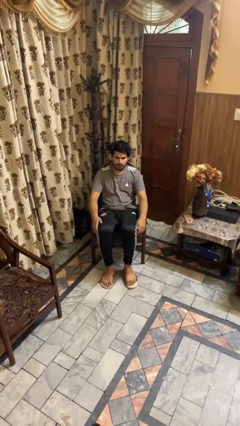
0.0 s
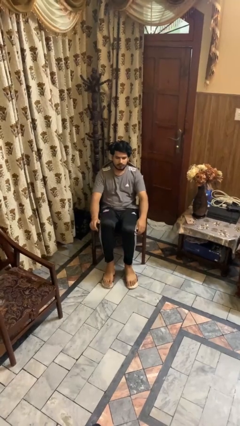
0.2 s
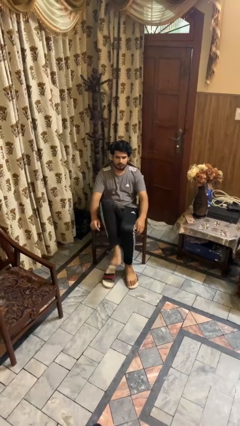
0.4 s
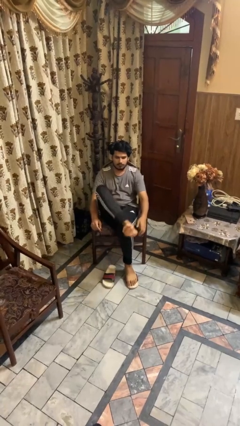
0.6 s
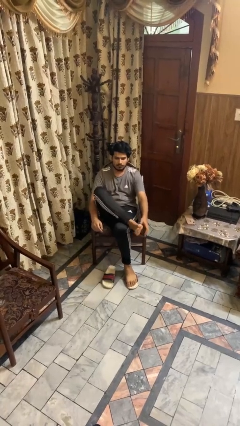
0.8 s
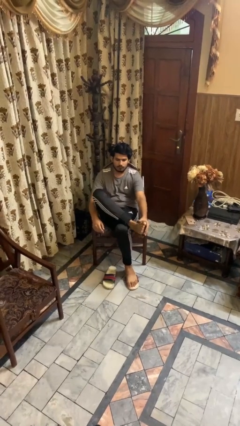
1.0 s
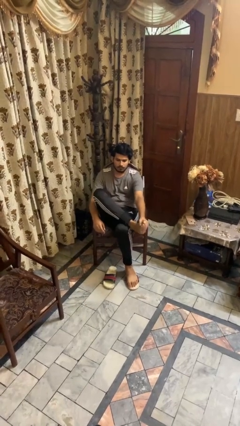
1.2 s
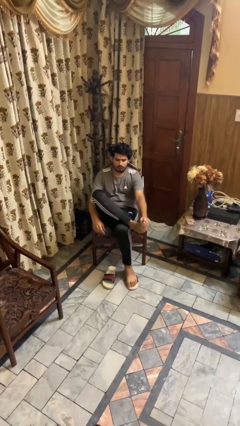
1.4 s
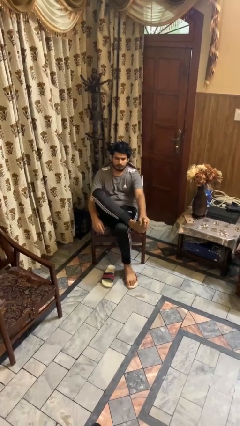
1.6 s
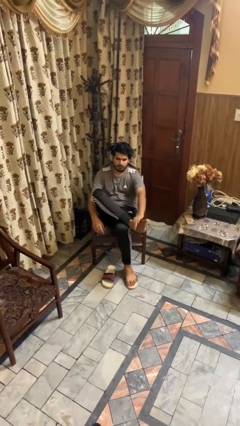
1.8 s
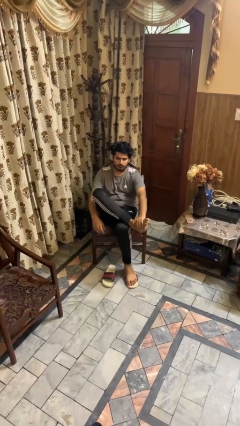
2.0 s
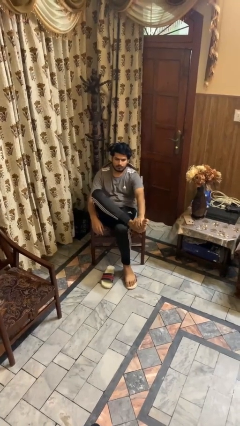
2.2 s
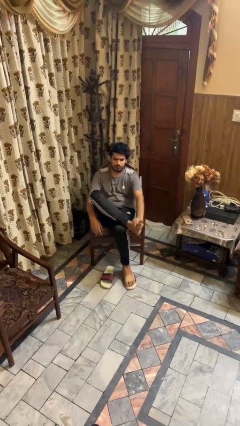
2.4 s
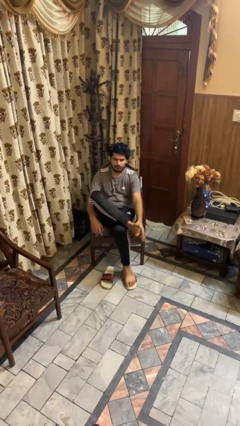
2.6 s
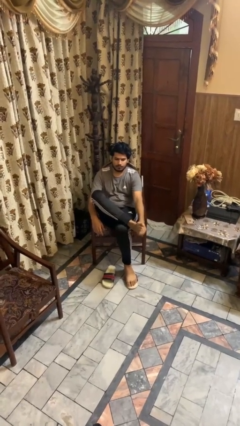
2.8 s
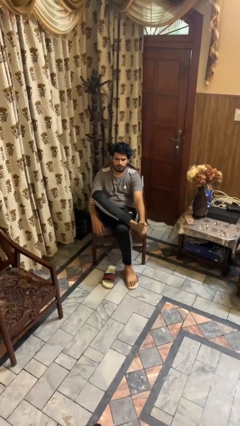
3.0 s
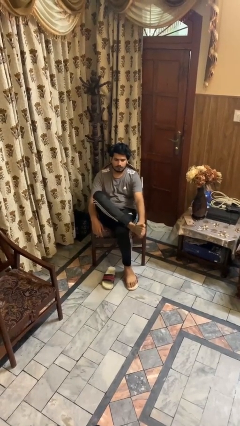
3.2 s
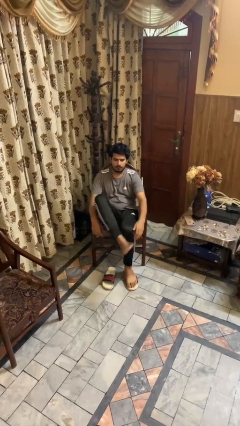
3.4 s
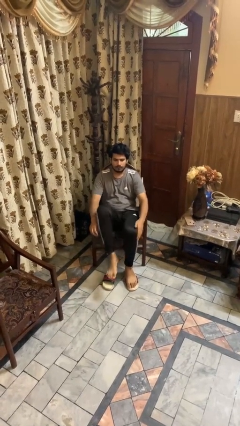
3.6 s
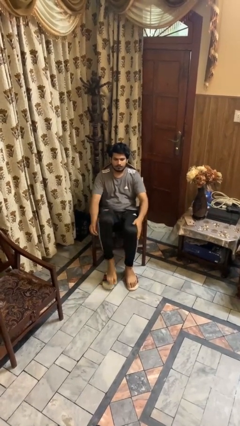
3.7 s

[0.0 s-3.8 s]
person rubs foot

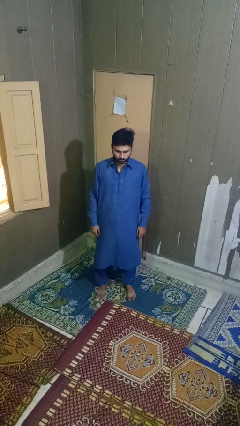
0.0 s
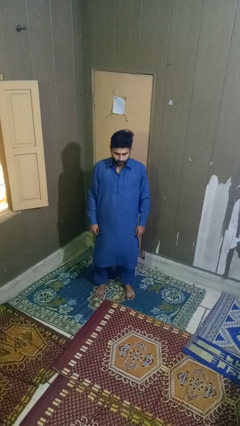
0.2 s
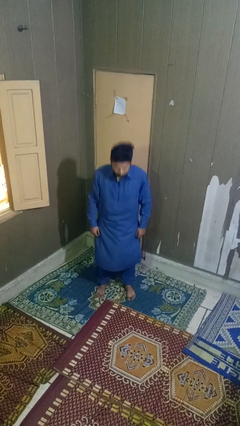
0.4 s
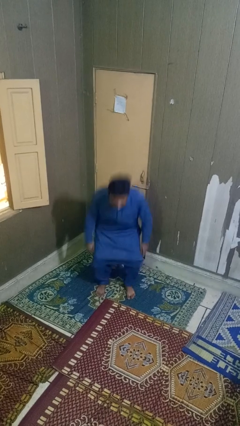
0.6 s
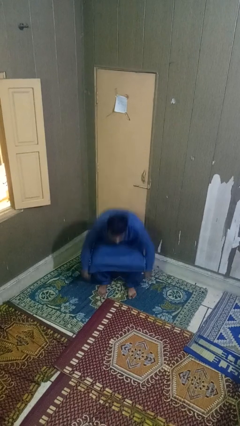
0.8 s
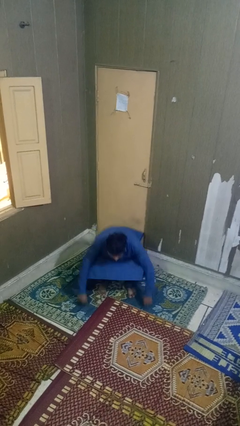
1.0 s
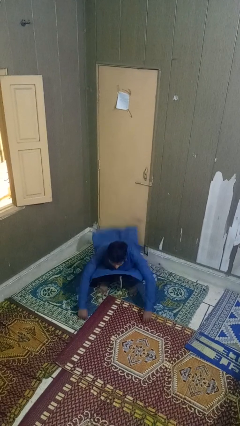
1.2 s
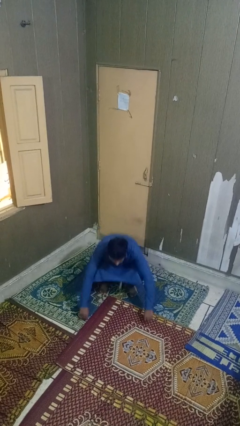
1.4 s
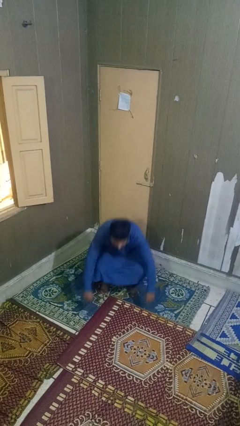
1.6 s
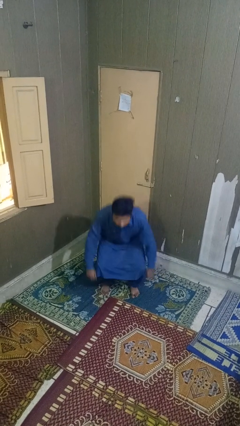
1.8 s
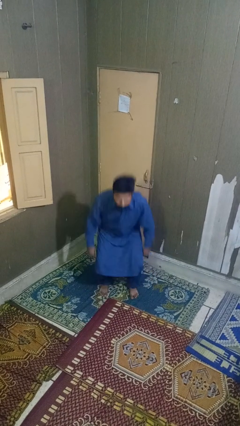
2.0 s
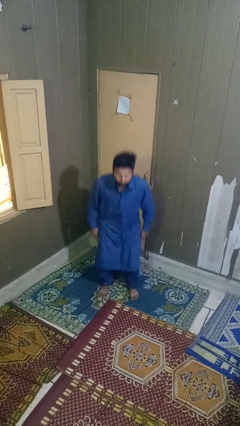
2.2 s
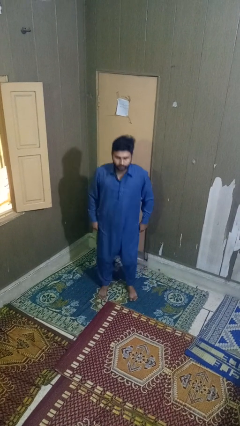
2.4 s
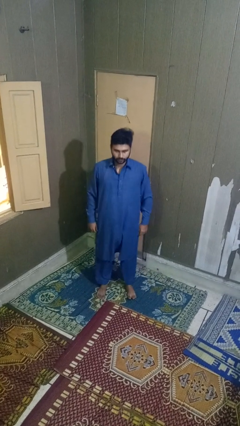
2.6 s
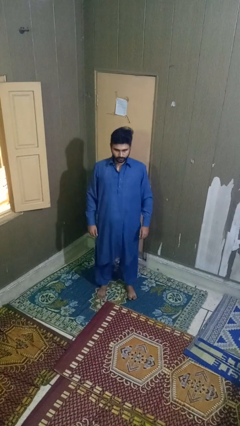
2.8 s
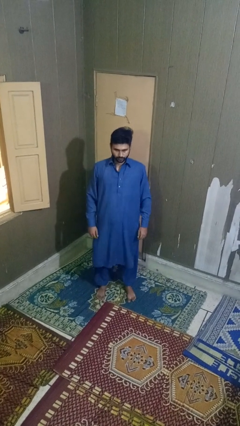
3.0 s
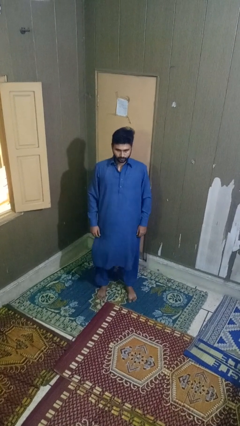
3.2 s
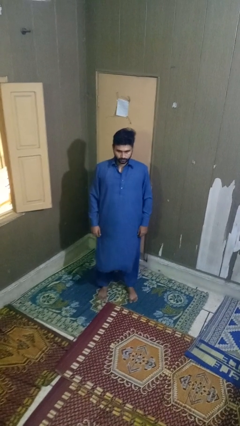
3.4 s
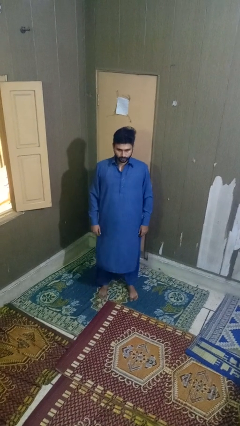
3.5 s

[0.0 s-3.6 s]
person exercises with situp

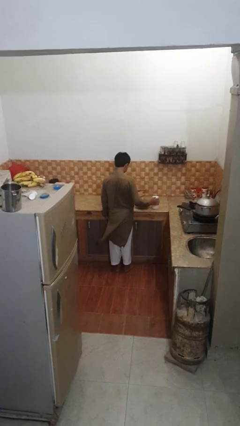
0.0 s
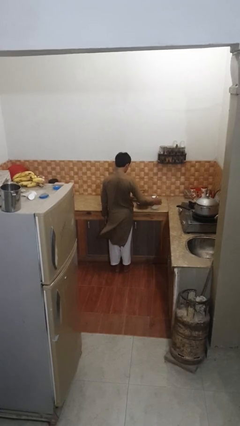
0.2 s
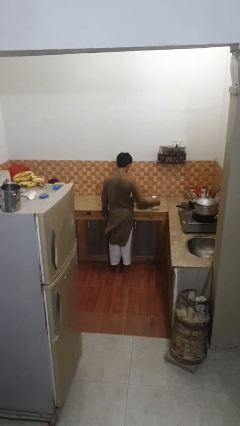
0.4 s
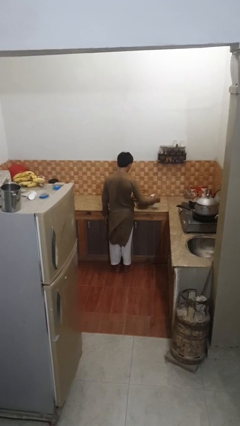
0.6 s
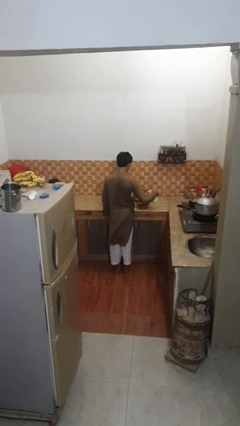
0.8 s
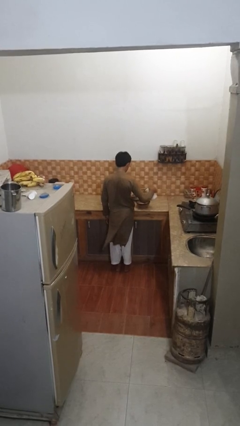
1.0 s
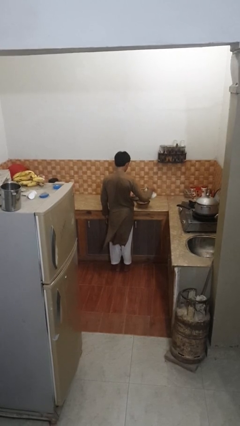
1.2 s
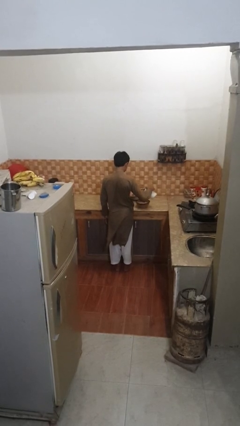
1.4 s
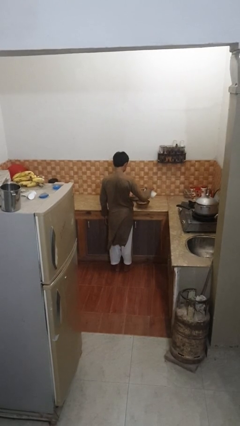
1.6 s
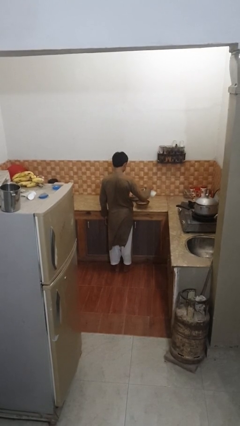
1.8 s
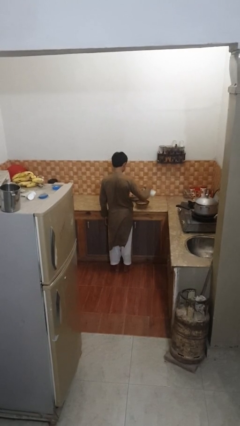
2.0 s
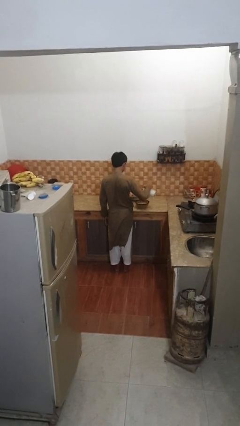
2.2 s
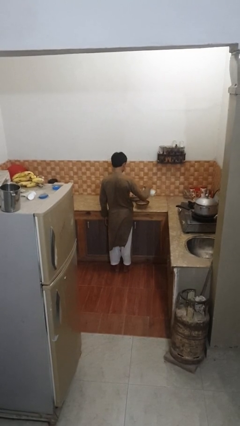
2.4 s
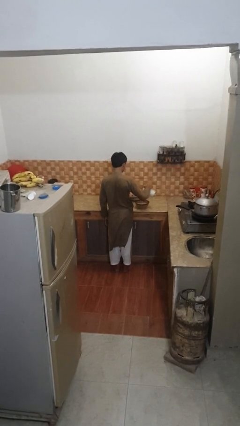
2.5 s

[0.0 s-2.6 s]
person pours into bowl

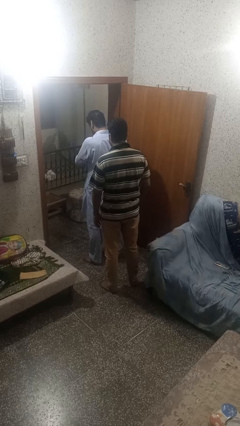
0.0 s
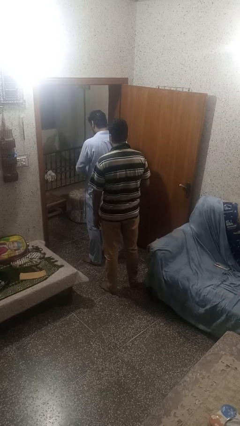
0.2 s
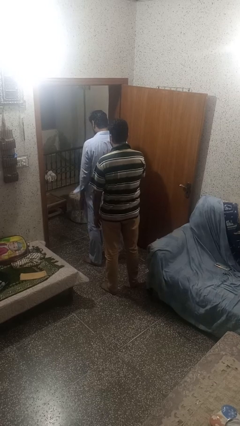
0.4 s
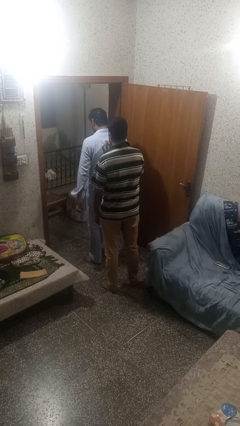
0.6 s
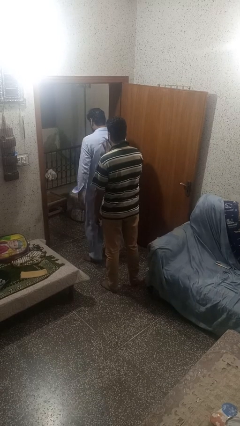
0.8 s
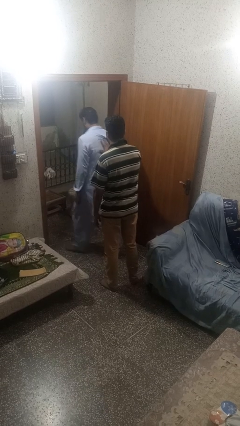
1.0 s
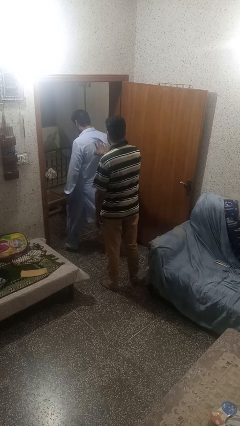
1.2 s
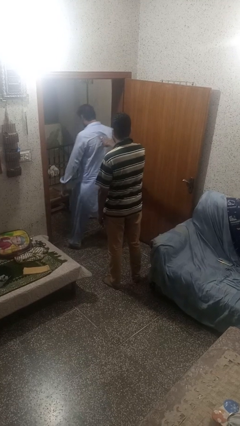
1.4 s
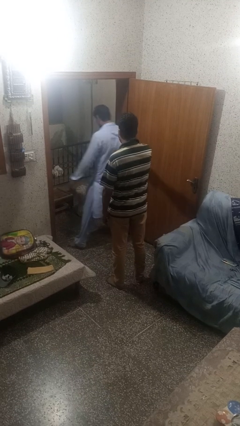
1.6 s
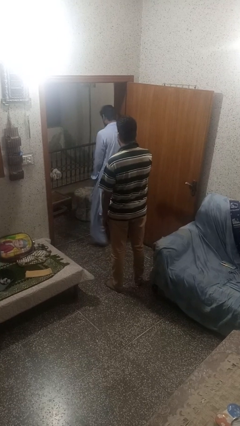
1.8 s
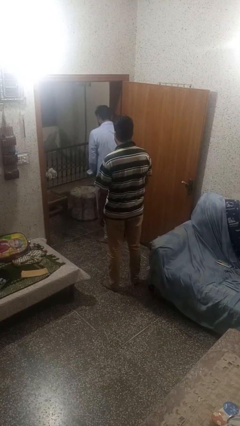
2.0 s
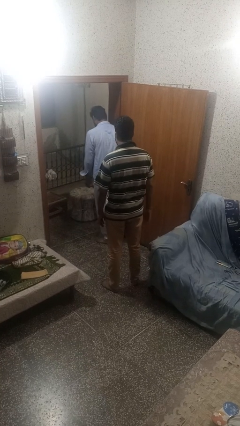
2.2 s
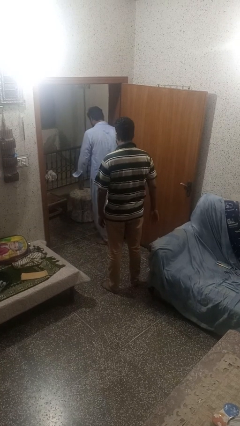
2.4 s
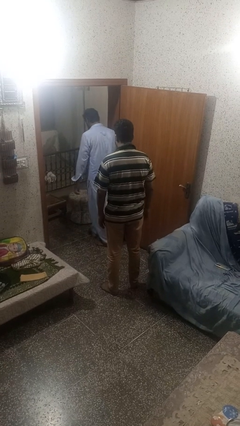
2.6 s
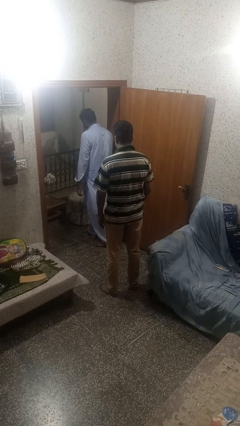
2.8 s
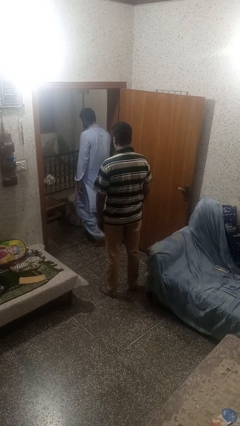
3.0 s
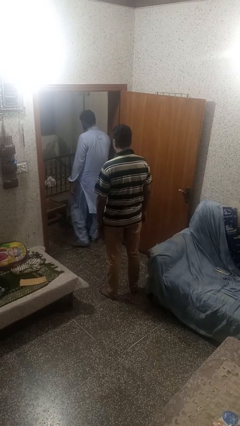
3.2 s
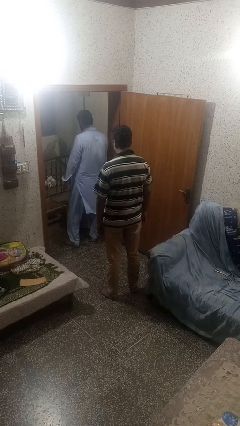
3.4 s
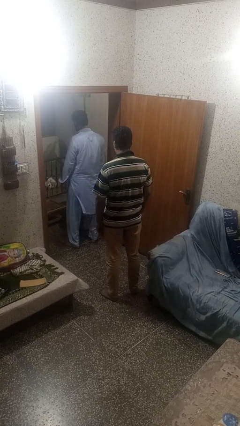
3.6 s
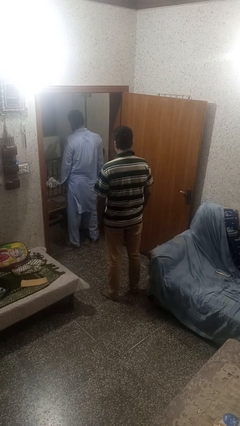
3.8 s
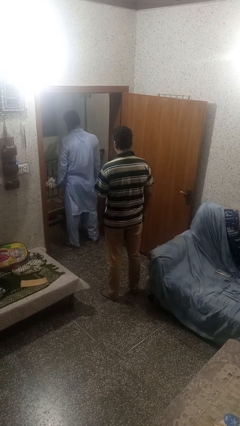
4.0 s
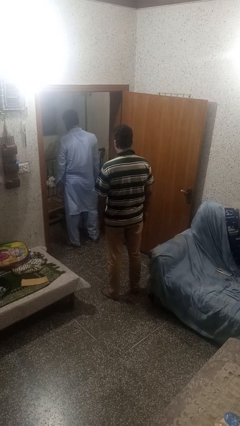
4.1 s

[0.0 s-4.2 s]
person shoves person

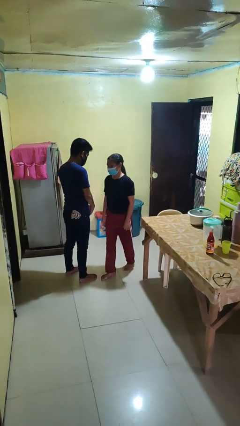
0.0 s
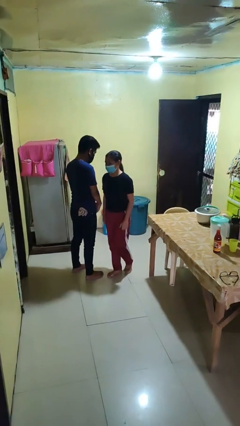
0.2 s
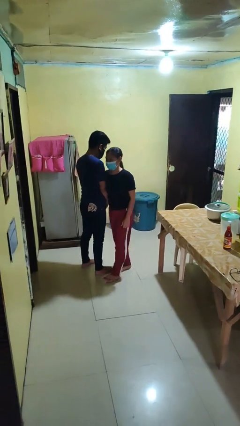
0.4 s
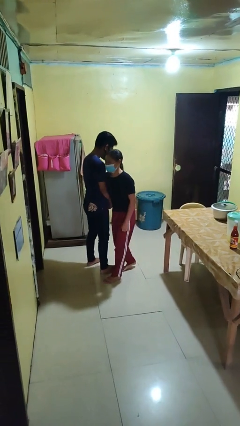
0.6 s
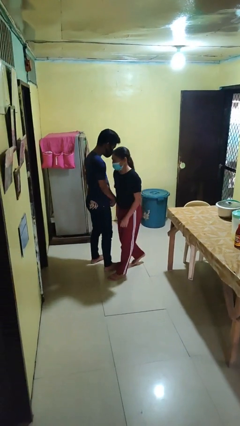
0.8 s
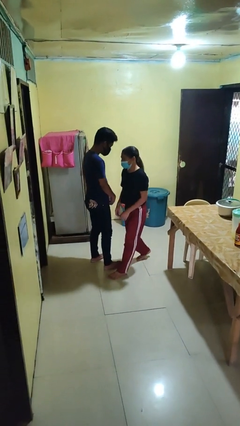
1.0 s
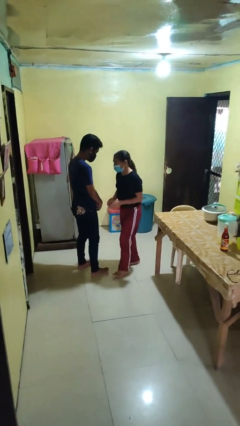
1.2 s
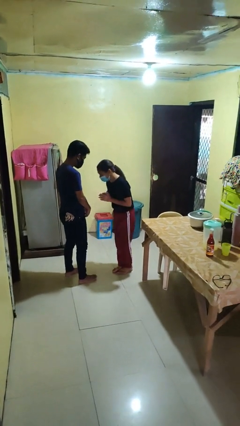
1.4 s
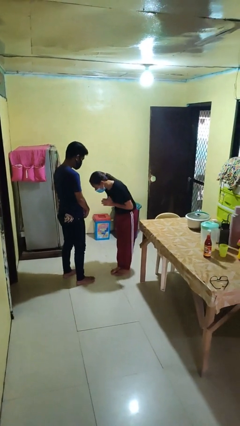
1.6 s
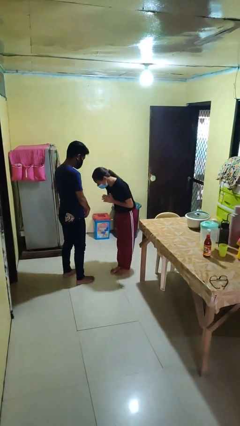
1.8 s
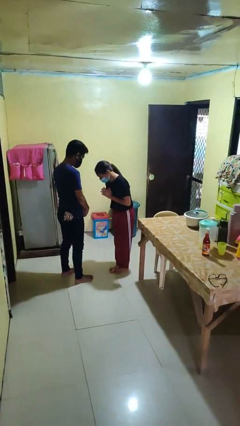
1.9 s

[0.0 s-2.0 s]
person bumps into person

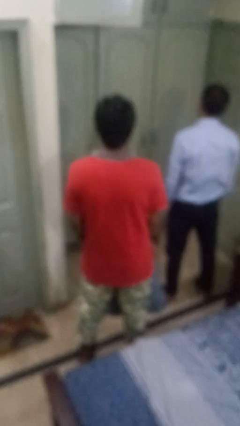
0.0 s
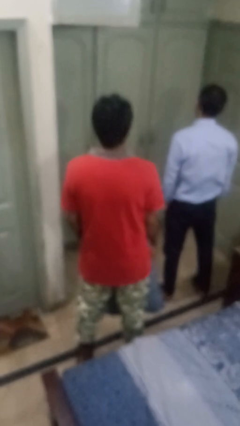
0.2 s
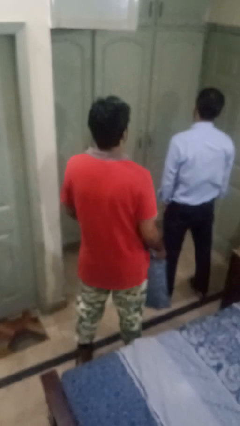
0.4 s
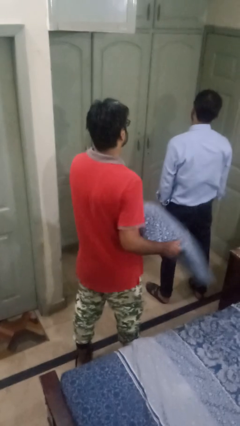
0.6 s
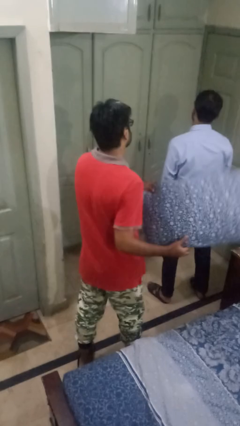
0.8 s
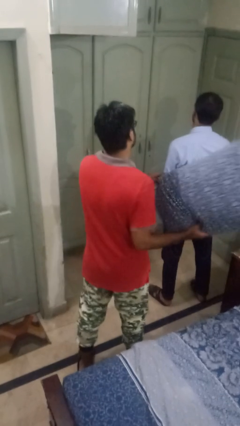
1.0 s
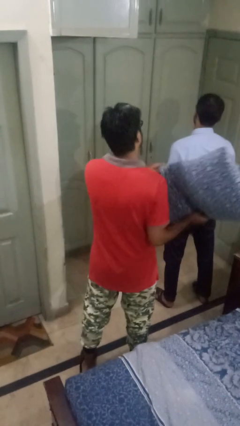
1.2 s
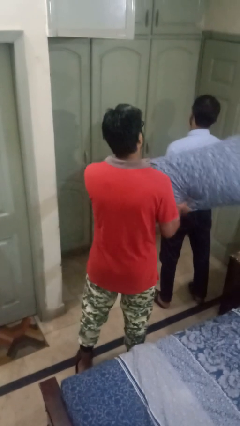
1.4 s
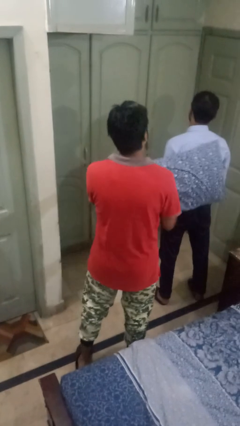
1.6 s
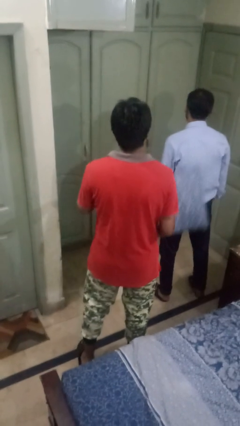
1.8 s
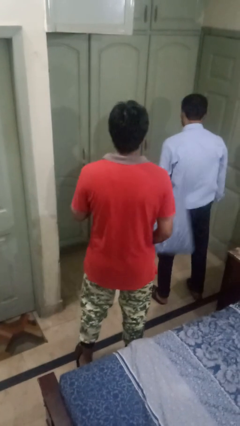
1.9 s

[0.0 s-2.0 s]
person hits person with pillow
